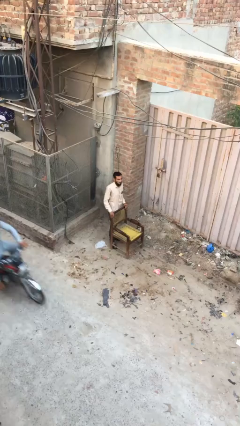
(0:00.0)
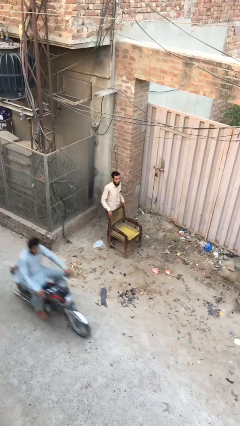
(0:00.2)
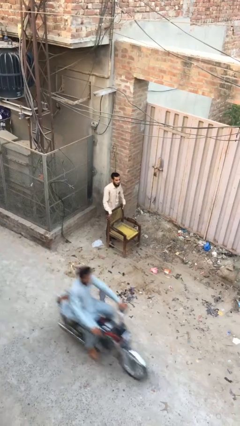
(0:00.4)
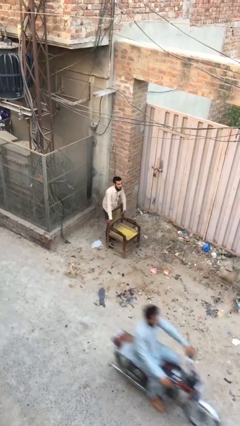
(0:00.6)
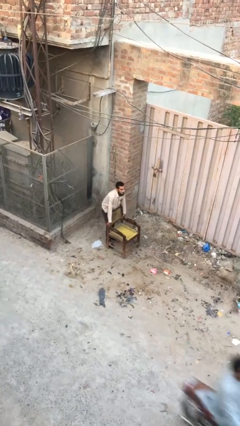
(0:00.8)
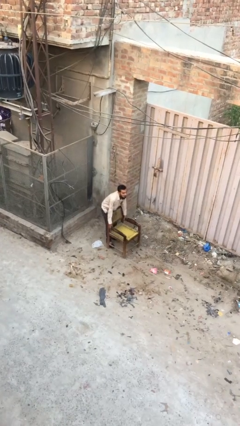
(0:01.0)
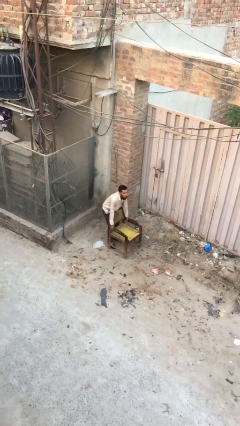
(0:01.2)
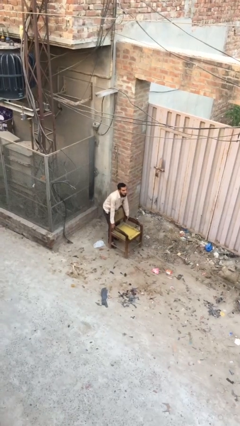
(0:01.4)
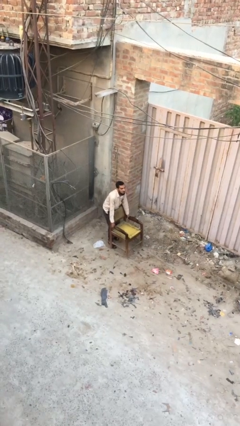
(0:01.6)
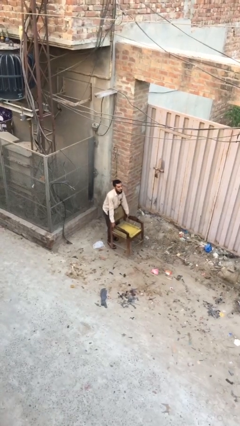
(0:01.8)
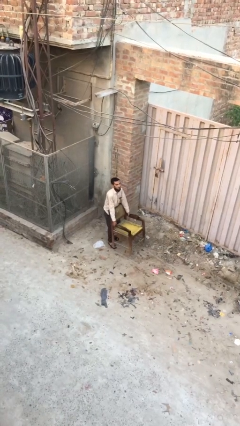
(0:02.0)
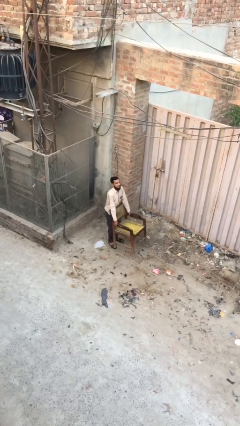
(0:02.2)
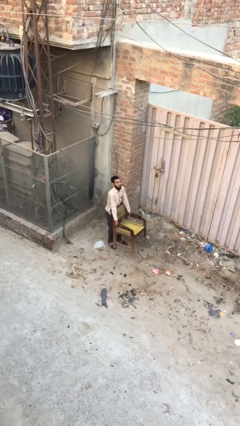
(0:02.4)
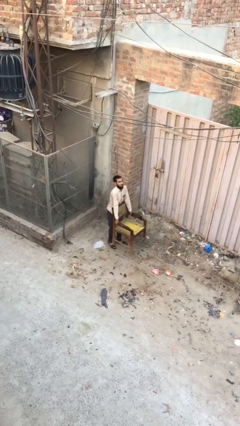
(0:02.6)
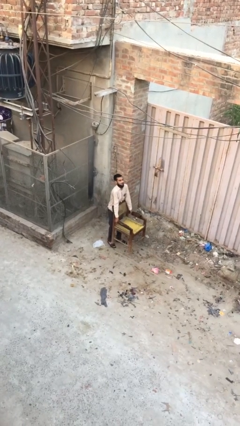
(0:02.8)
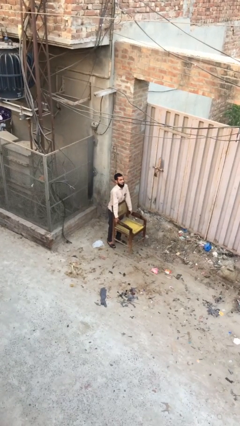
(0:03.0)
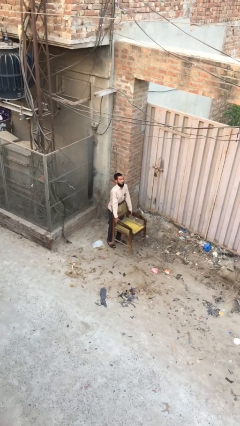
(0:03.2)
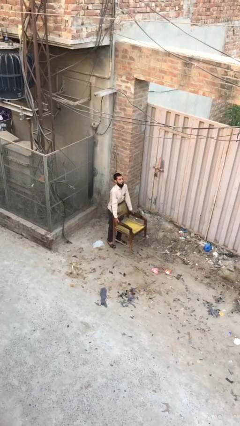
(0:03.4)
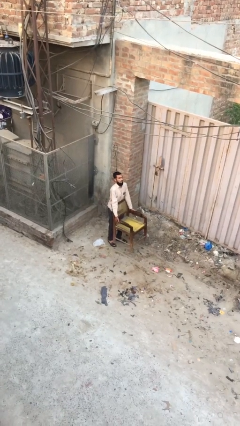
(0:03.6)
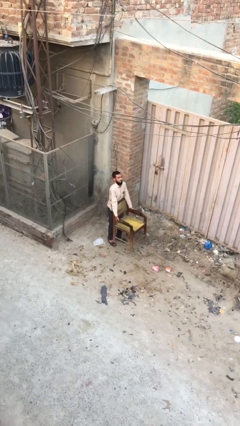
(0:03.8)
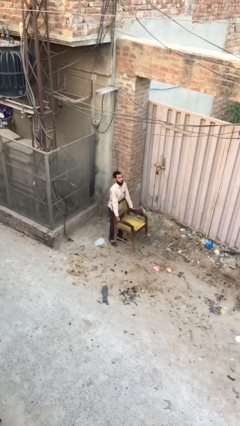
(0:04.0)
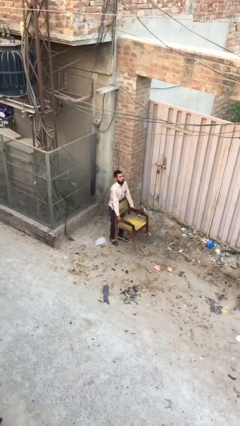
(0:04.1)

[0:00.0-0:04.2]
person picks up object from floor

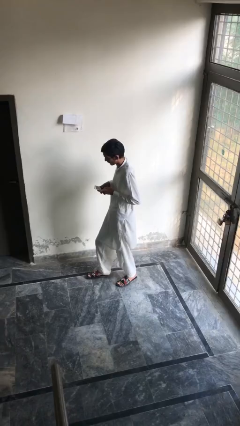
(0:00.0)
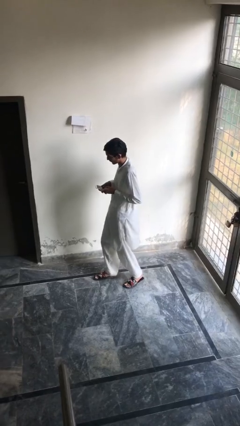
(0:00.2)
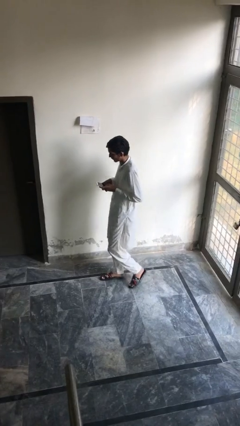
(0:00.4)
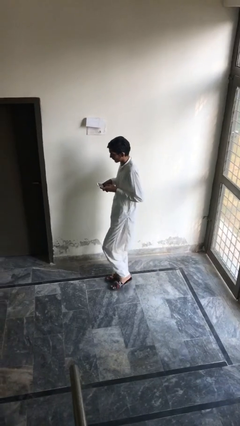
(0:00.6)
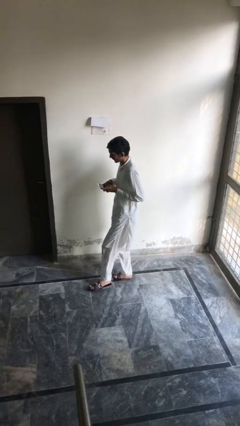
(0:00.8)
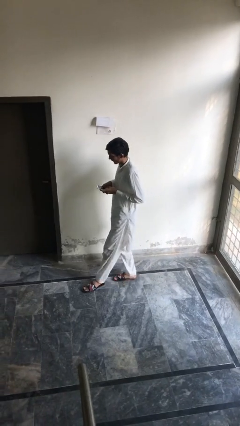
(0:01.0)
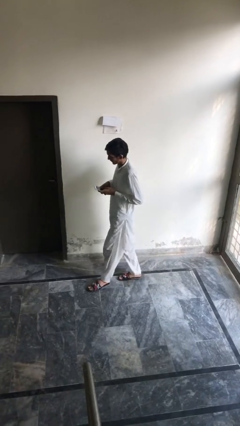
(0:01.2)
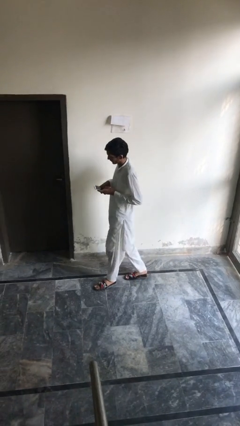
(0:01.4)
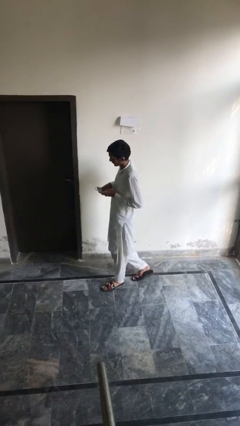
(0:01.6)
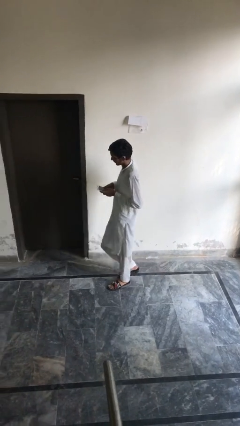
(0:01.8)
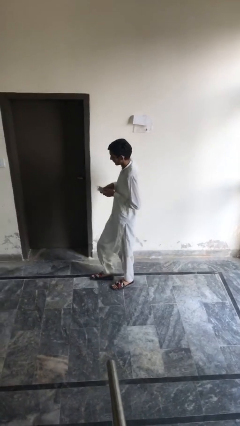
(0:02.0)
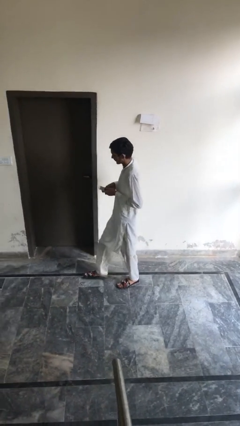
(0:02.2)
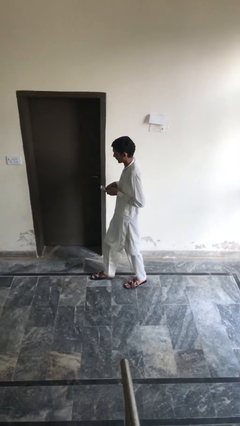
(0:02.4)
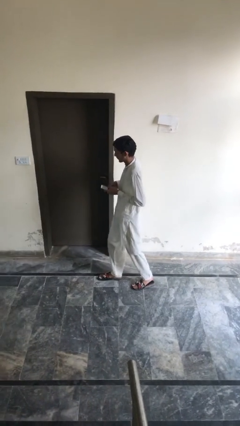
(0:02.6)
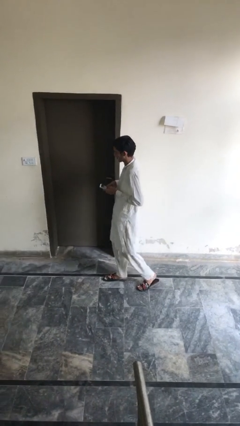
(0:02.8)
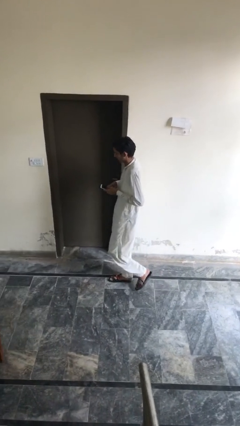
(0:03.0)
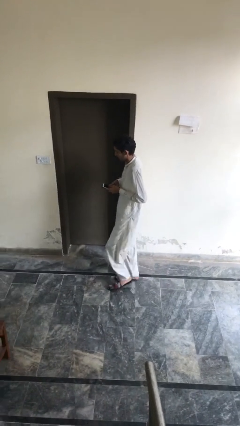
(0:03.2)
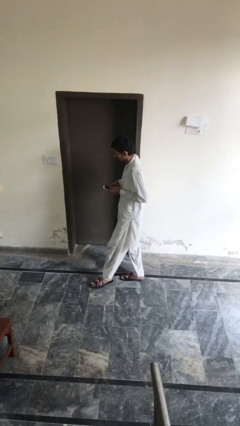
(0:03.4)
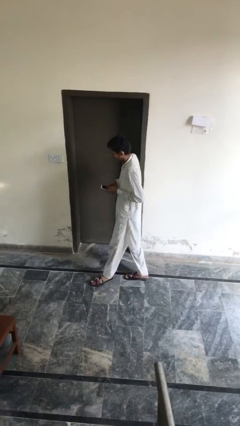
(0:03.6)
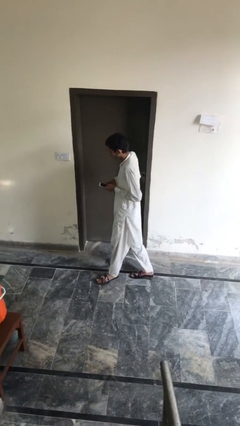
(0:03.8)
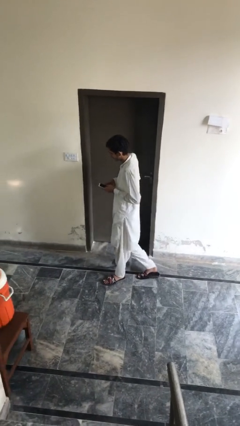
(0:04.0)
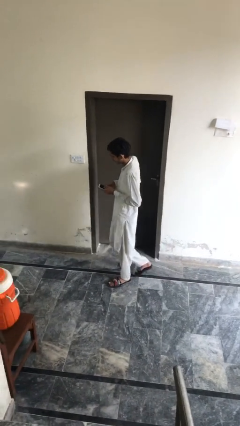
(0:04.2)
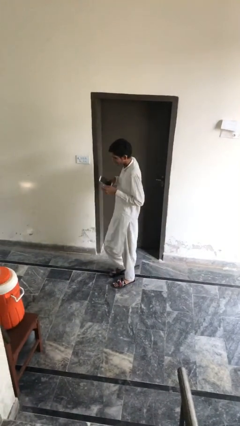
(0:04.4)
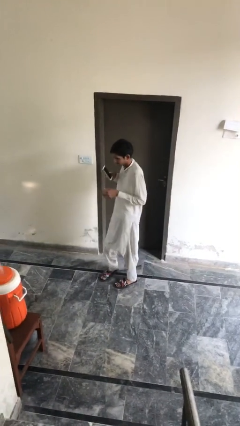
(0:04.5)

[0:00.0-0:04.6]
person texts on phone

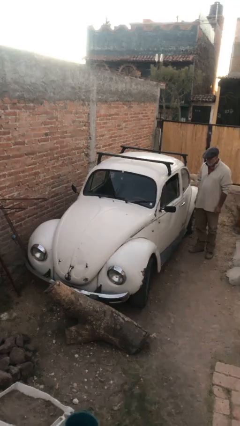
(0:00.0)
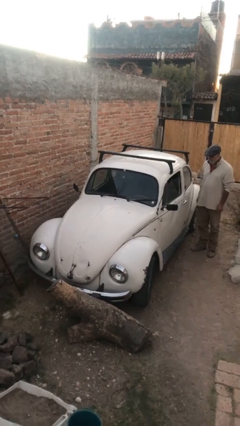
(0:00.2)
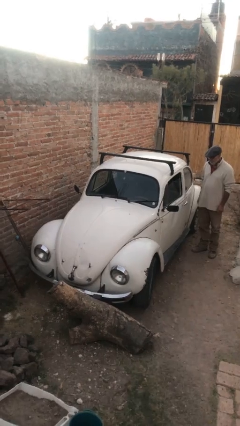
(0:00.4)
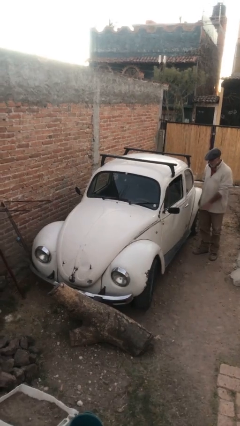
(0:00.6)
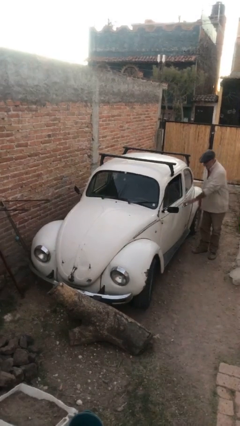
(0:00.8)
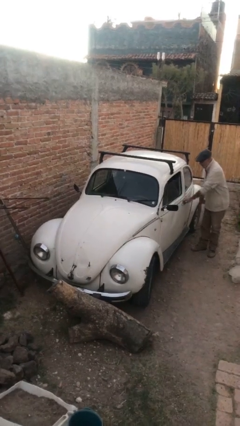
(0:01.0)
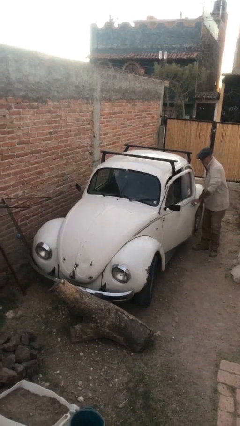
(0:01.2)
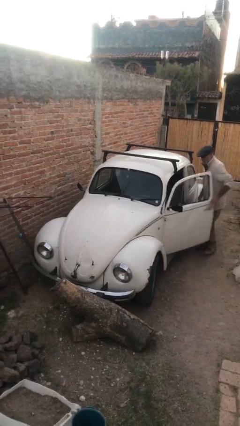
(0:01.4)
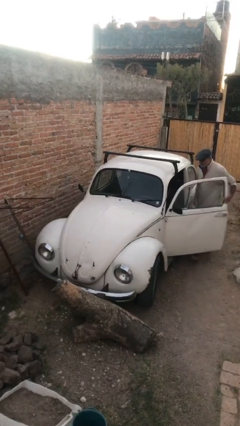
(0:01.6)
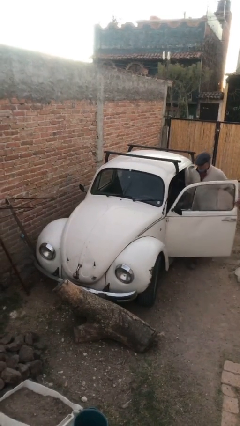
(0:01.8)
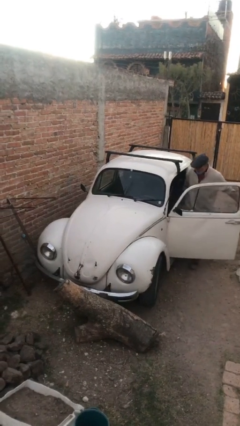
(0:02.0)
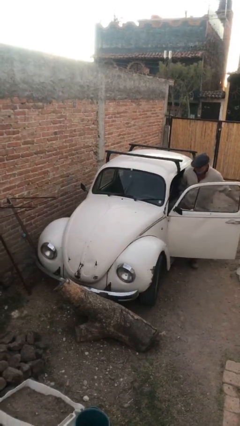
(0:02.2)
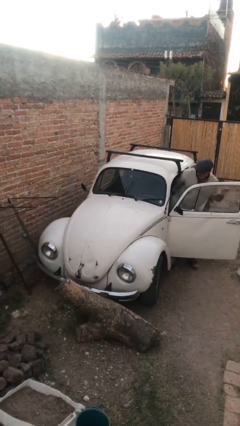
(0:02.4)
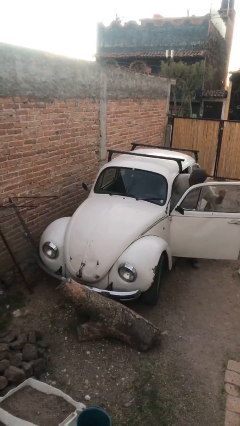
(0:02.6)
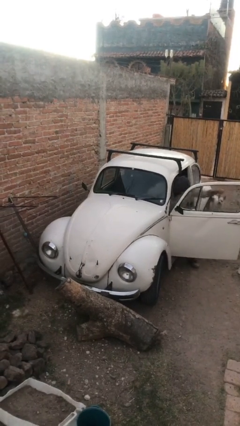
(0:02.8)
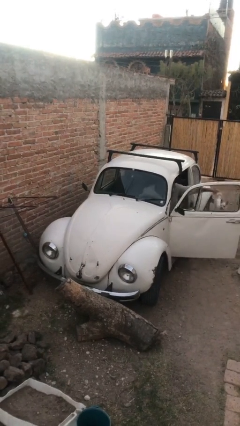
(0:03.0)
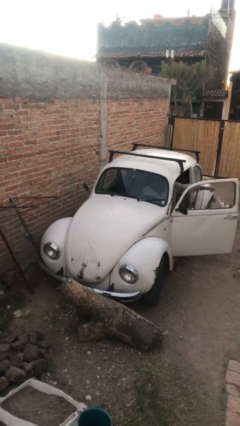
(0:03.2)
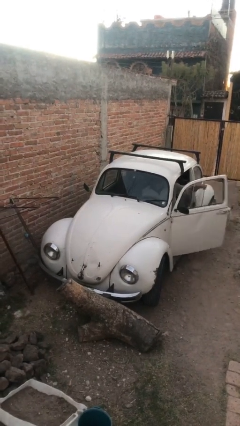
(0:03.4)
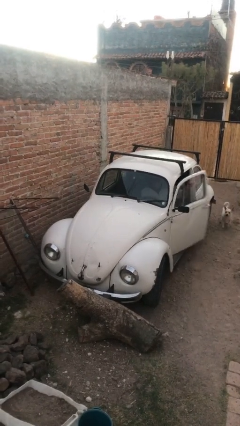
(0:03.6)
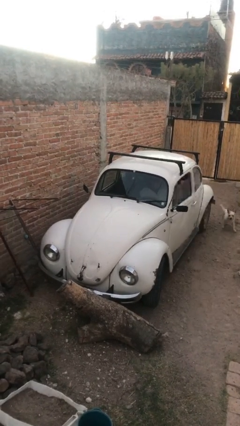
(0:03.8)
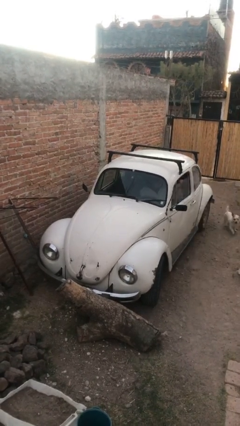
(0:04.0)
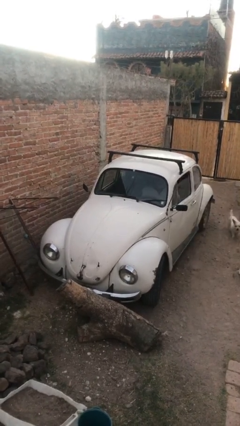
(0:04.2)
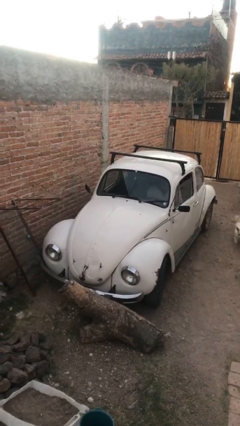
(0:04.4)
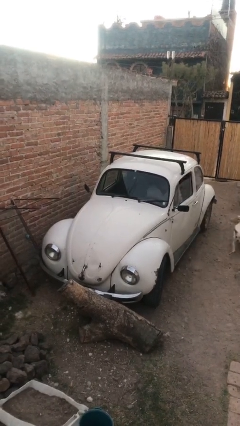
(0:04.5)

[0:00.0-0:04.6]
car picks up person

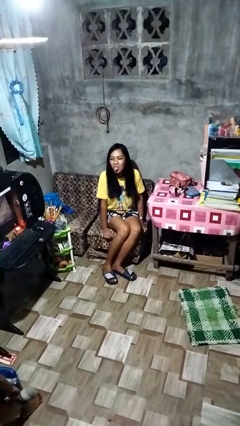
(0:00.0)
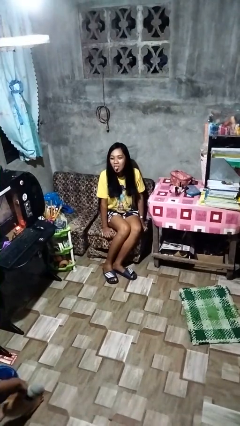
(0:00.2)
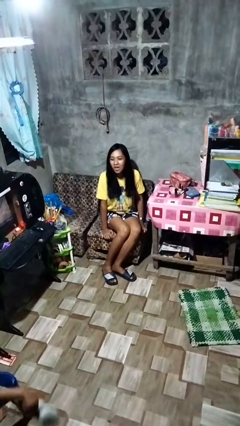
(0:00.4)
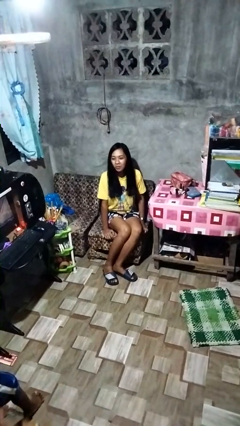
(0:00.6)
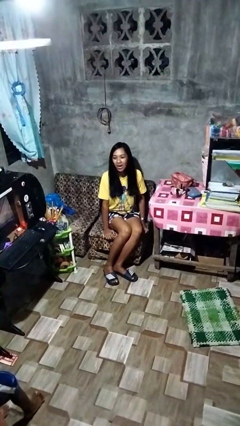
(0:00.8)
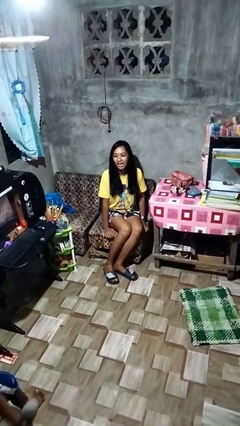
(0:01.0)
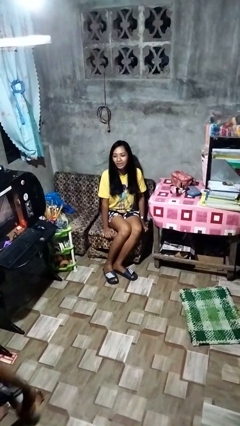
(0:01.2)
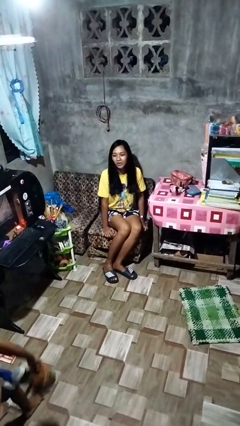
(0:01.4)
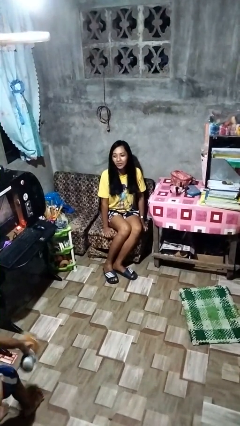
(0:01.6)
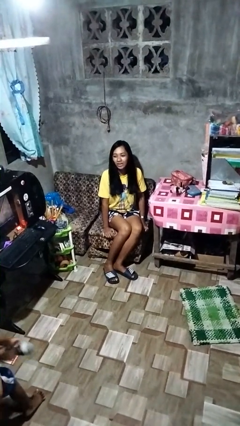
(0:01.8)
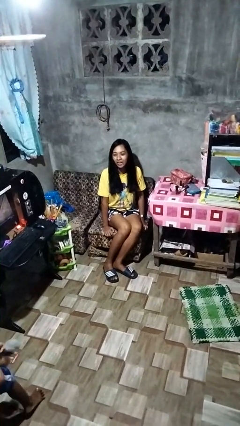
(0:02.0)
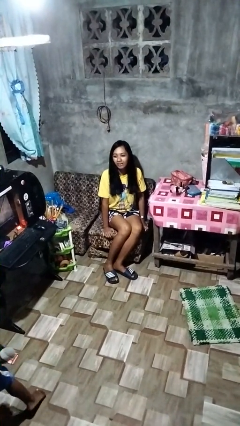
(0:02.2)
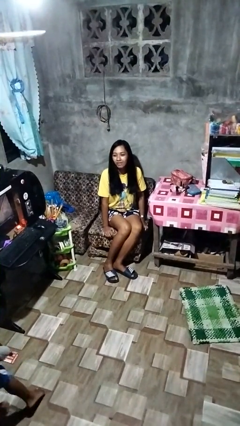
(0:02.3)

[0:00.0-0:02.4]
person sticks out tongue

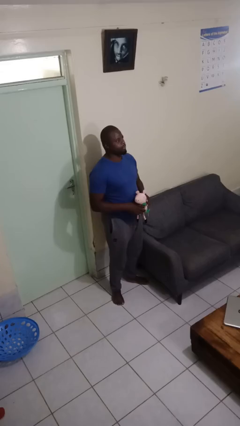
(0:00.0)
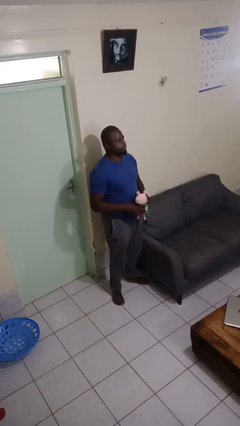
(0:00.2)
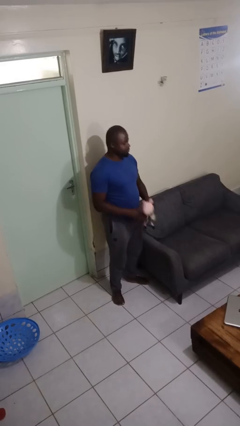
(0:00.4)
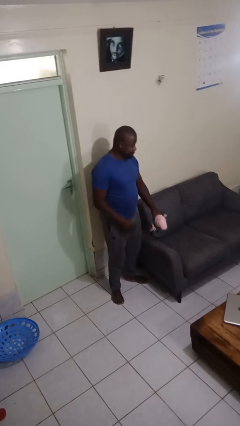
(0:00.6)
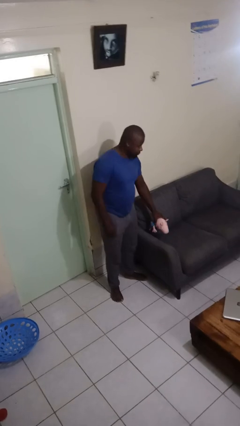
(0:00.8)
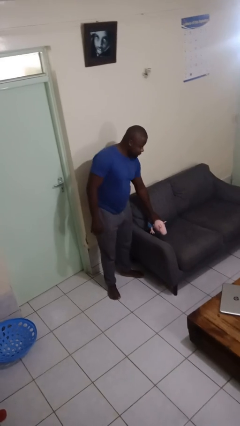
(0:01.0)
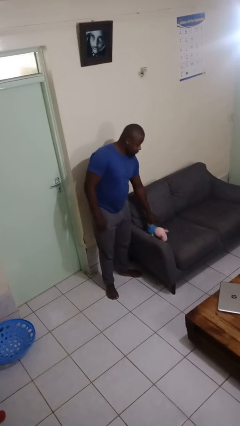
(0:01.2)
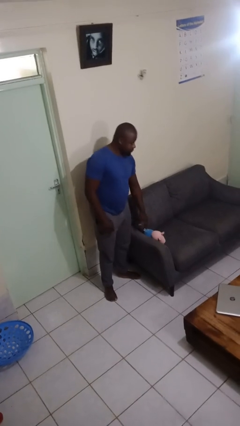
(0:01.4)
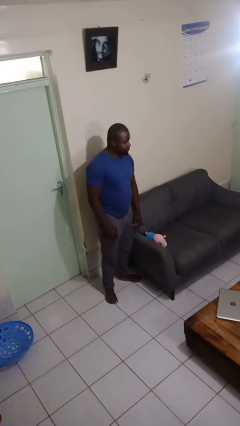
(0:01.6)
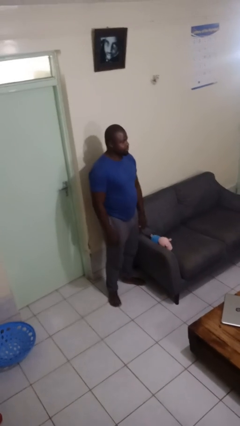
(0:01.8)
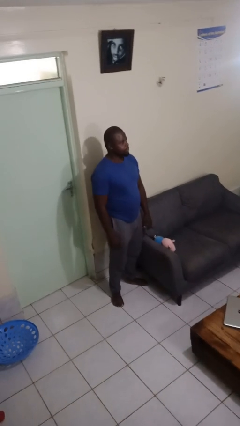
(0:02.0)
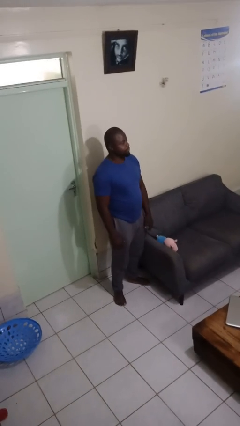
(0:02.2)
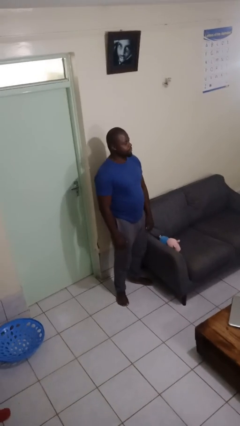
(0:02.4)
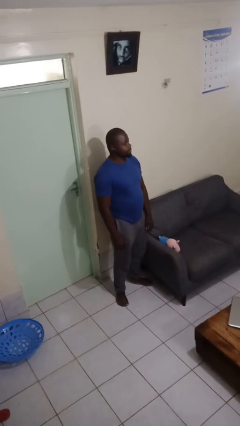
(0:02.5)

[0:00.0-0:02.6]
person puts down object on couch
